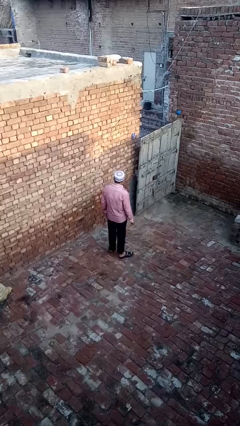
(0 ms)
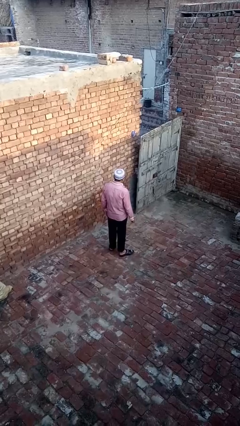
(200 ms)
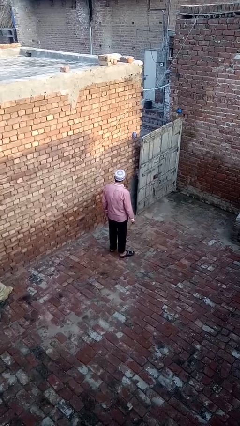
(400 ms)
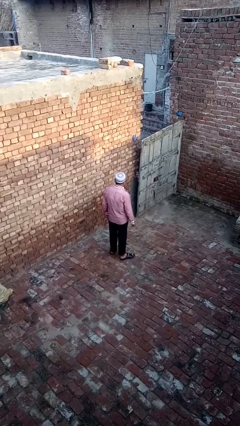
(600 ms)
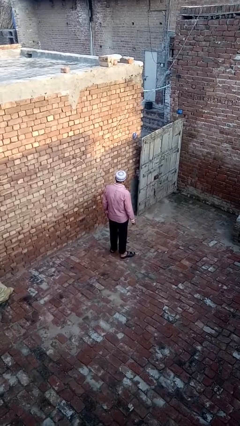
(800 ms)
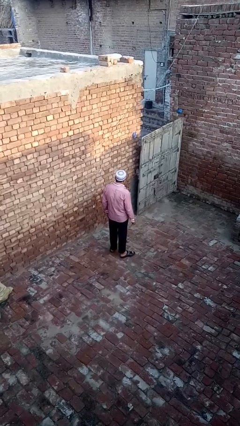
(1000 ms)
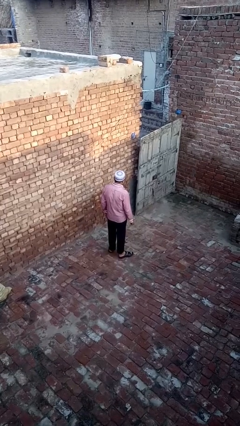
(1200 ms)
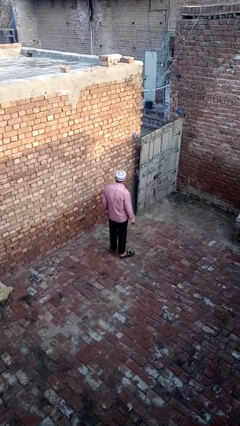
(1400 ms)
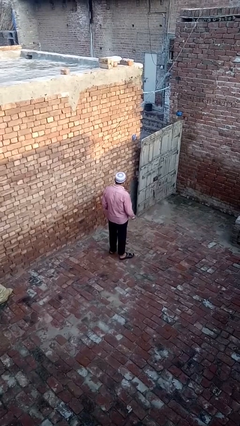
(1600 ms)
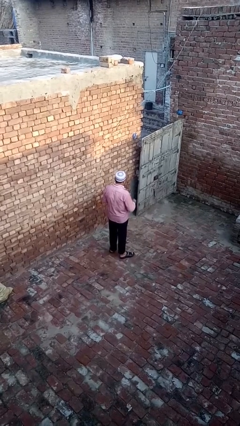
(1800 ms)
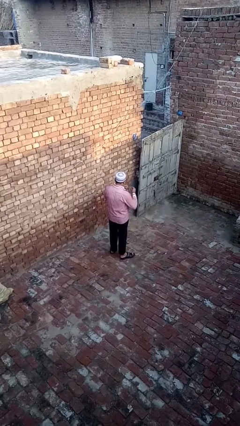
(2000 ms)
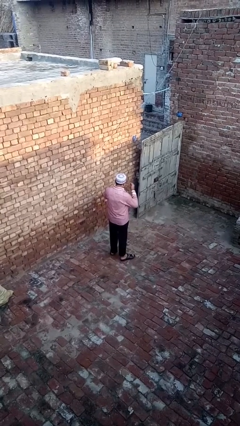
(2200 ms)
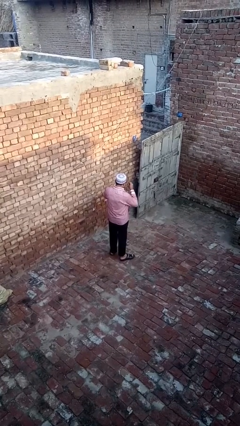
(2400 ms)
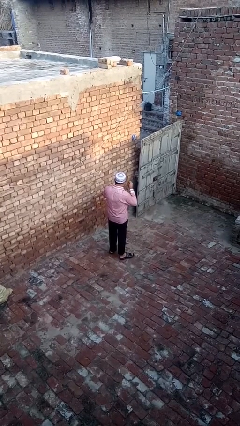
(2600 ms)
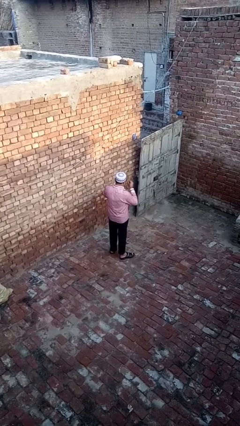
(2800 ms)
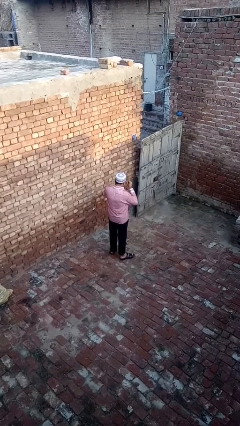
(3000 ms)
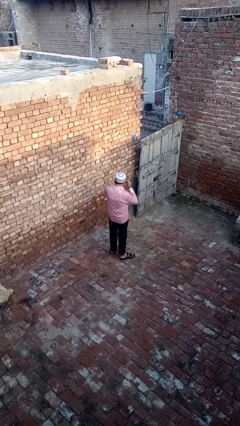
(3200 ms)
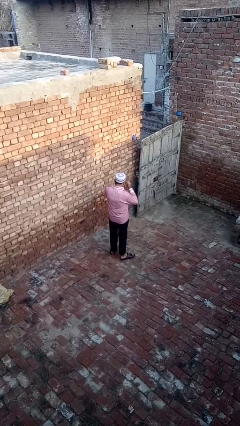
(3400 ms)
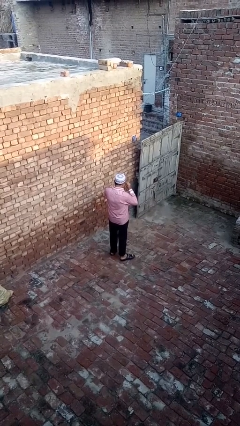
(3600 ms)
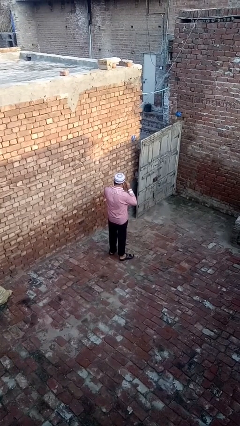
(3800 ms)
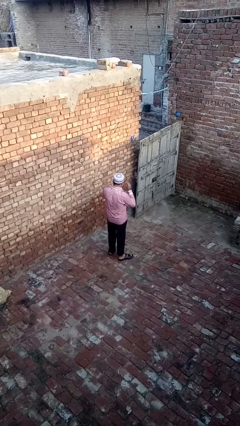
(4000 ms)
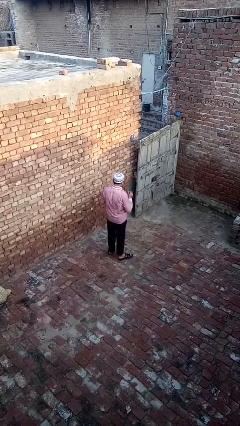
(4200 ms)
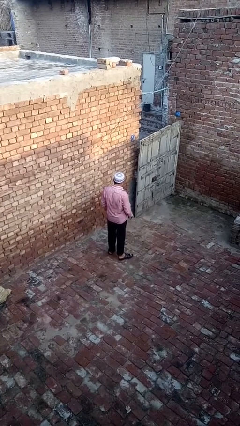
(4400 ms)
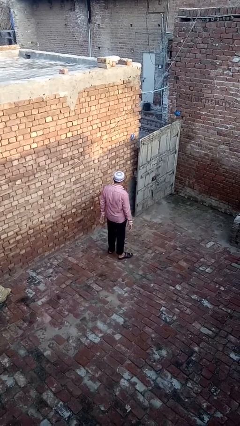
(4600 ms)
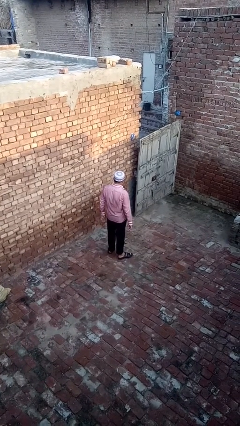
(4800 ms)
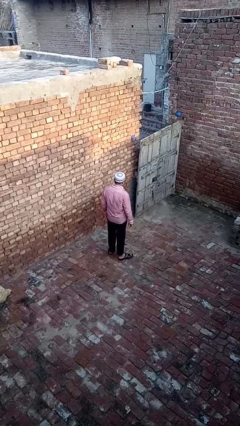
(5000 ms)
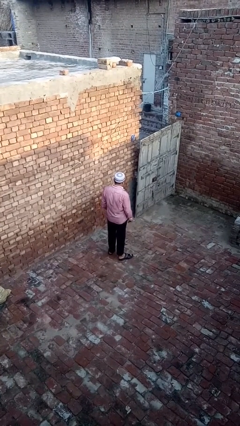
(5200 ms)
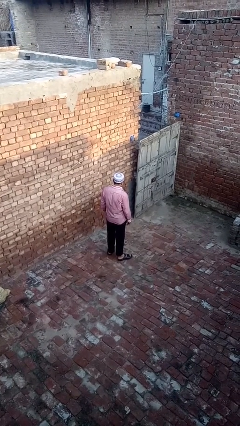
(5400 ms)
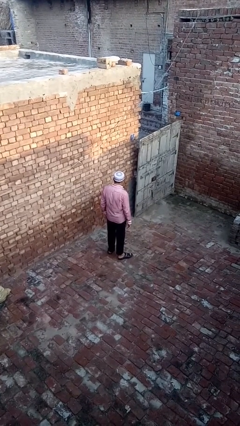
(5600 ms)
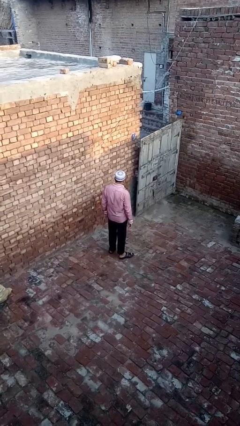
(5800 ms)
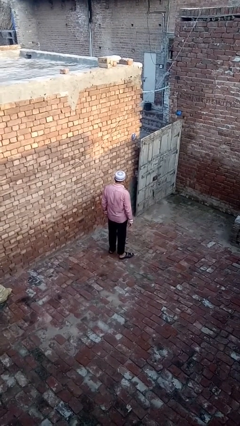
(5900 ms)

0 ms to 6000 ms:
person puts on glasses

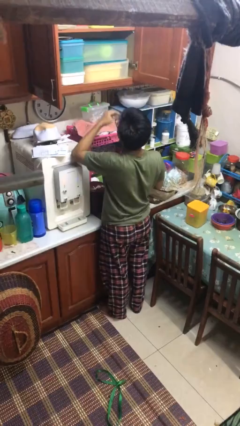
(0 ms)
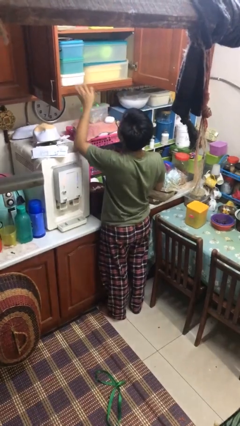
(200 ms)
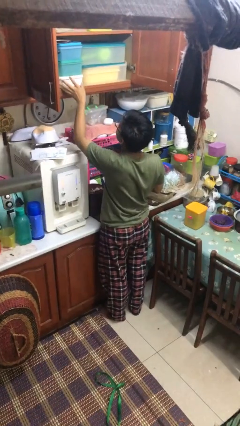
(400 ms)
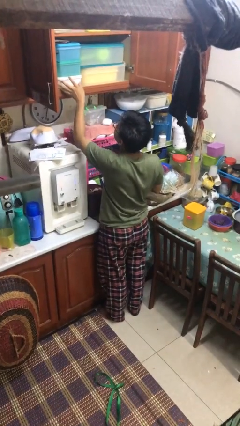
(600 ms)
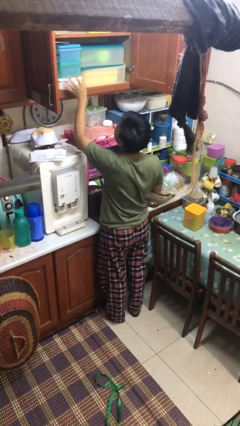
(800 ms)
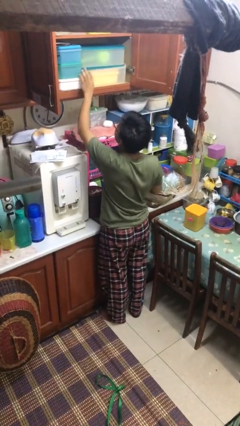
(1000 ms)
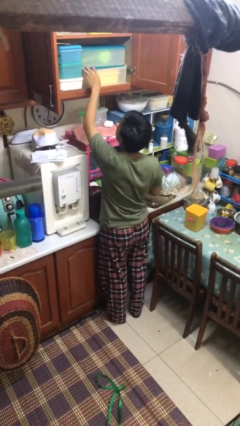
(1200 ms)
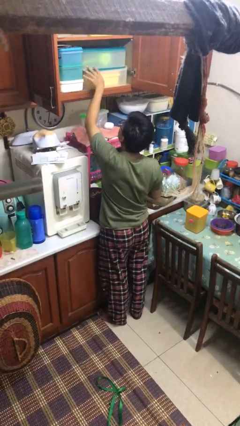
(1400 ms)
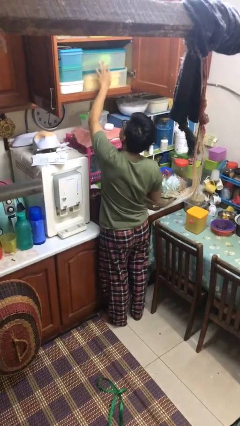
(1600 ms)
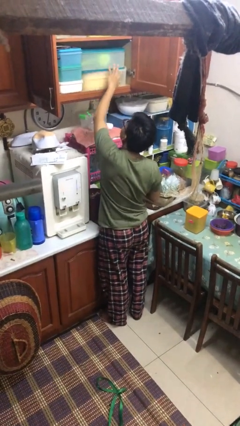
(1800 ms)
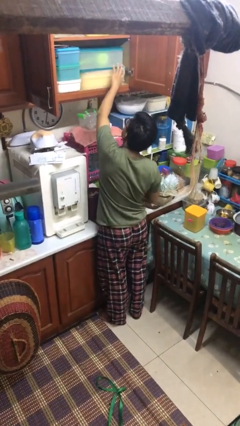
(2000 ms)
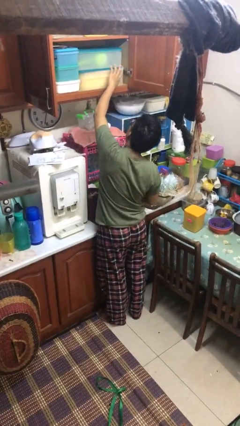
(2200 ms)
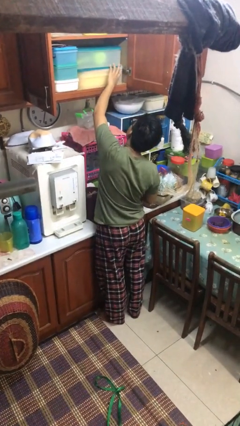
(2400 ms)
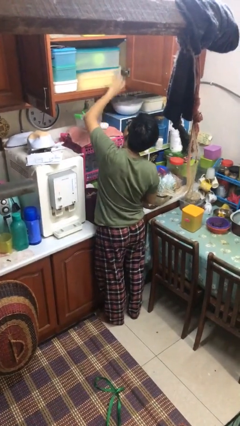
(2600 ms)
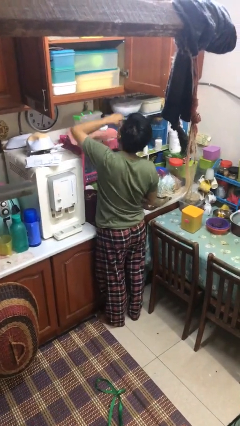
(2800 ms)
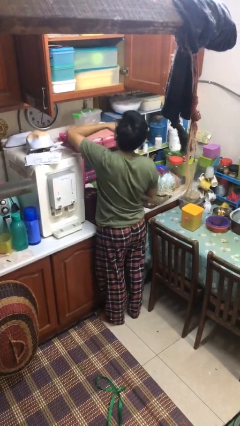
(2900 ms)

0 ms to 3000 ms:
person searches in kitchen drawer

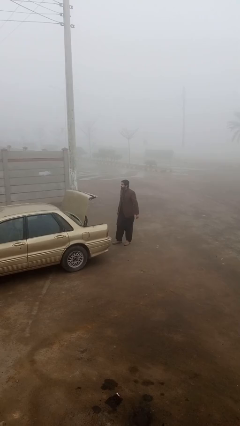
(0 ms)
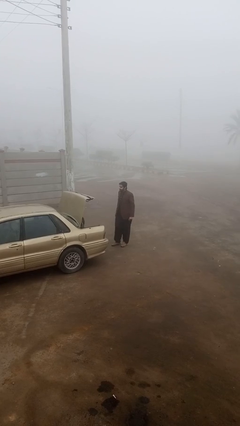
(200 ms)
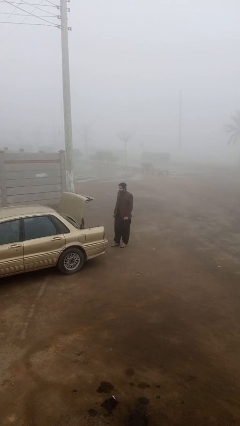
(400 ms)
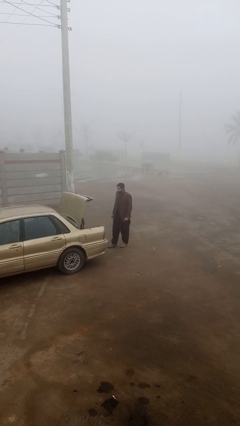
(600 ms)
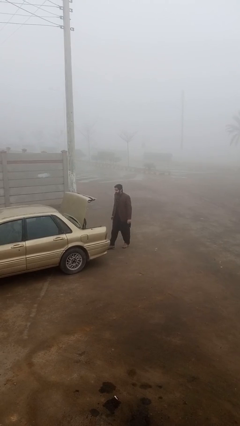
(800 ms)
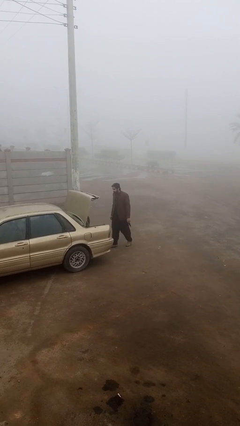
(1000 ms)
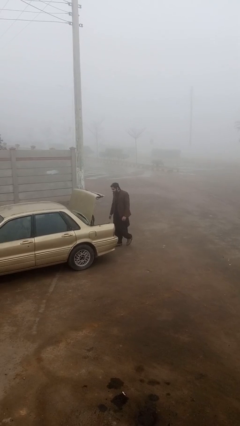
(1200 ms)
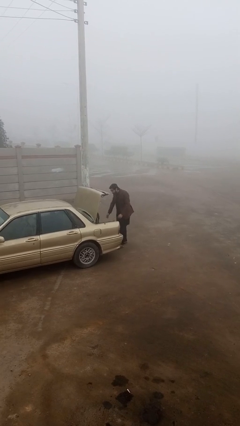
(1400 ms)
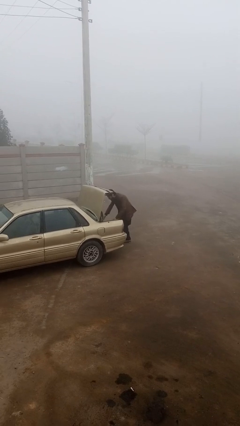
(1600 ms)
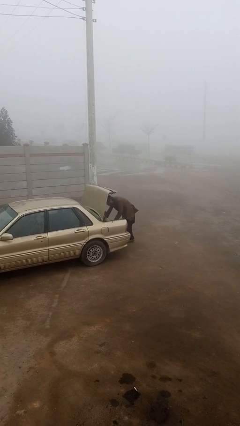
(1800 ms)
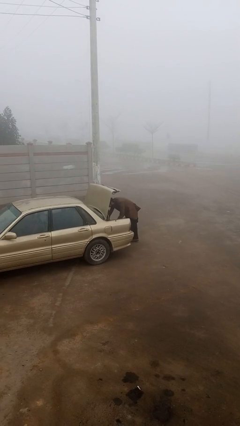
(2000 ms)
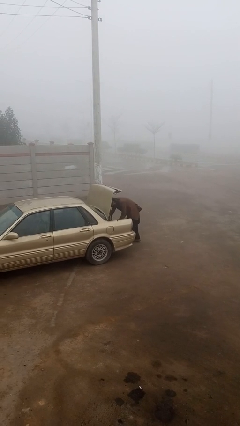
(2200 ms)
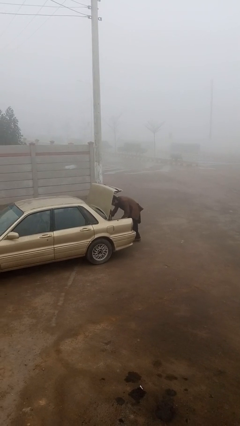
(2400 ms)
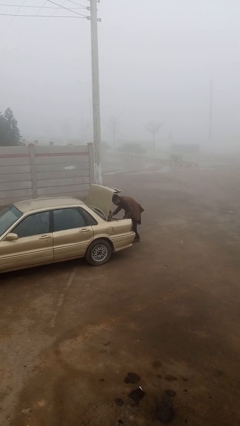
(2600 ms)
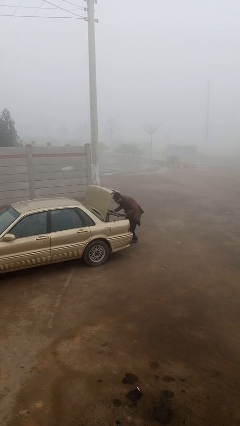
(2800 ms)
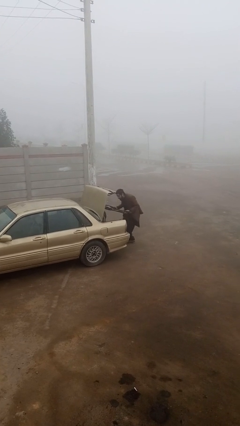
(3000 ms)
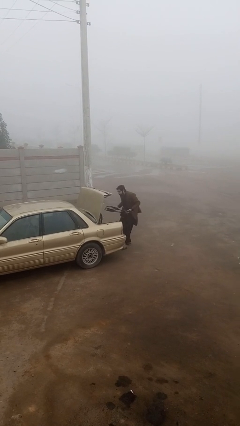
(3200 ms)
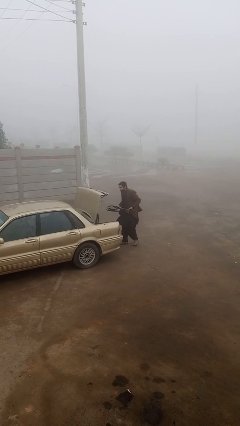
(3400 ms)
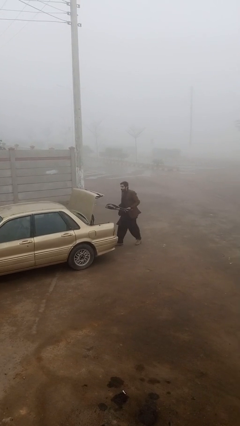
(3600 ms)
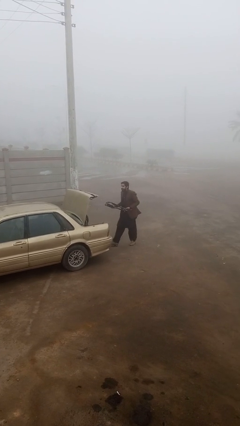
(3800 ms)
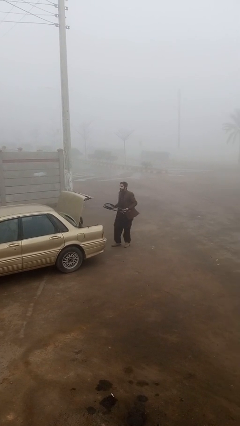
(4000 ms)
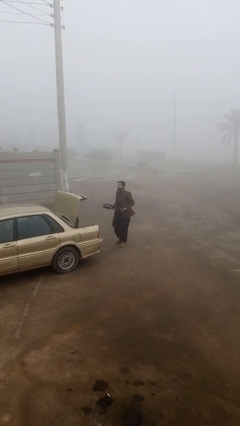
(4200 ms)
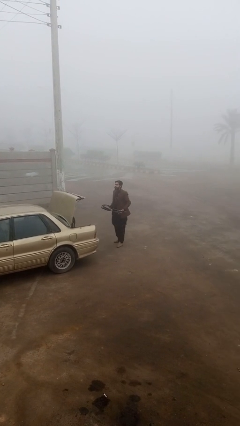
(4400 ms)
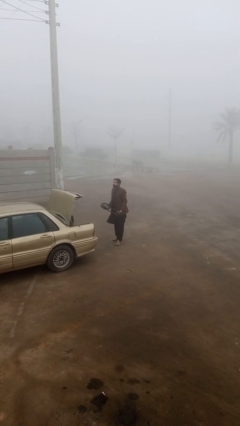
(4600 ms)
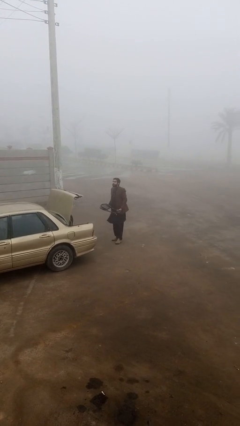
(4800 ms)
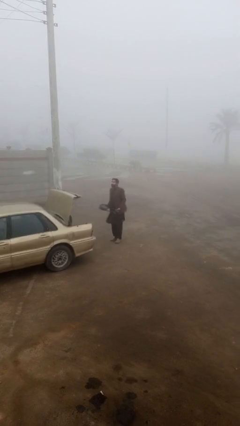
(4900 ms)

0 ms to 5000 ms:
person unloads car

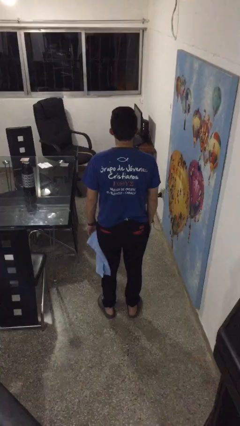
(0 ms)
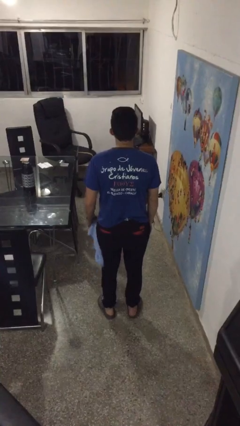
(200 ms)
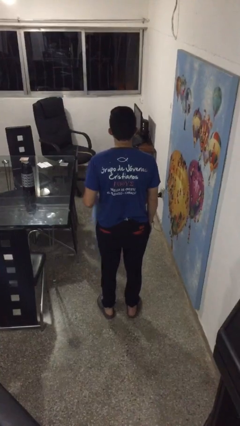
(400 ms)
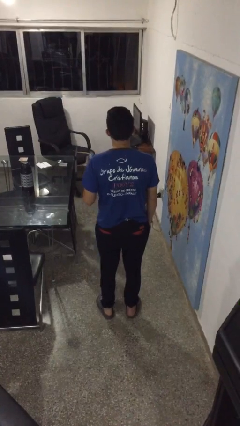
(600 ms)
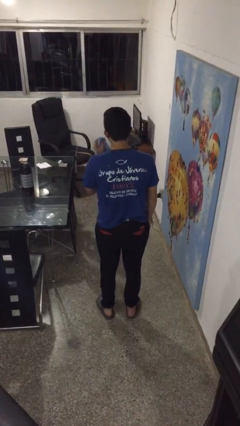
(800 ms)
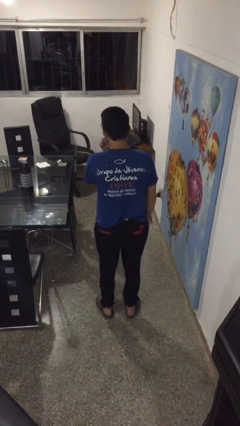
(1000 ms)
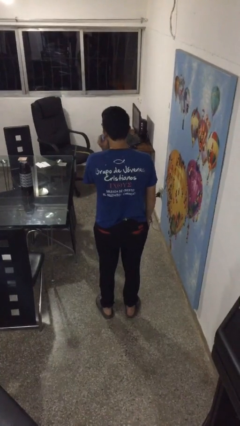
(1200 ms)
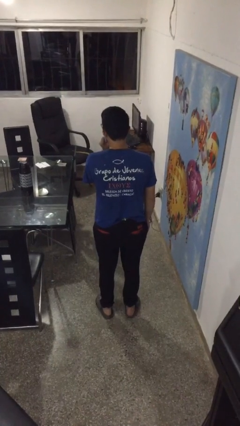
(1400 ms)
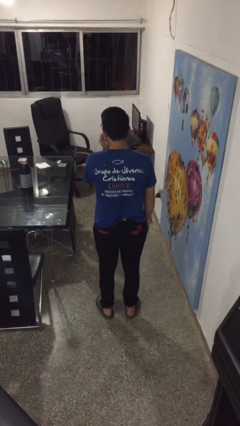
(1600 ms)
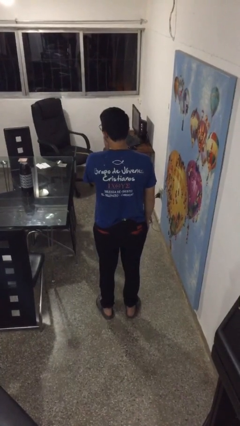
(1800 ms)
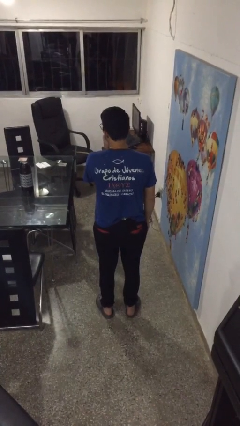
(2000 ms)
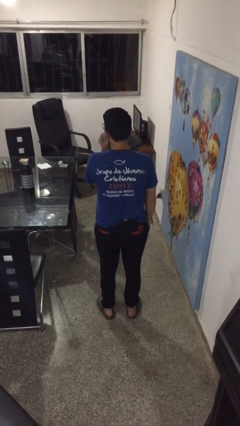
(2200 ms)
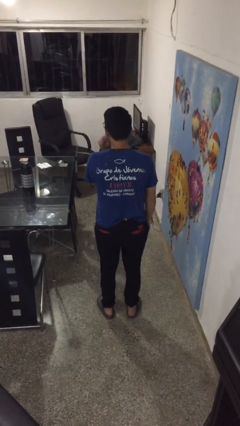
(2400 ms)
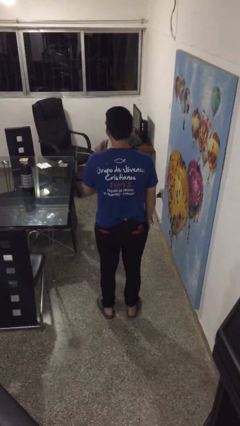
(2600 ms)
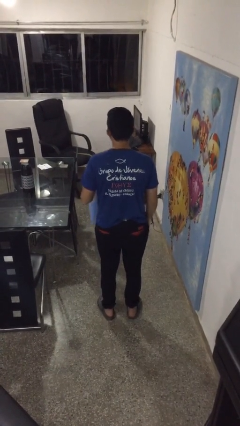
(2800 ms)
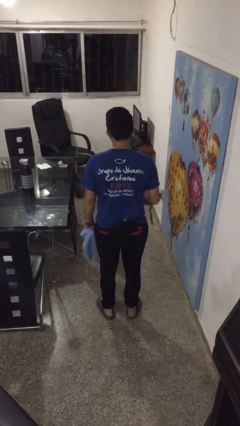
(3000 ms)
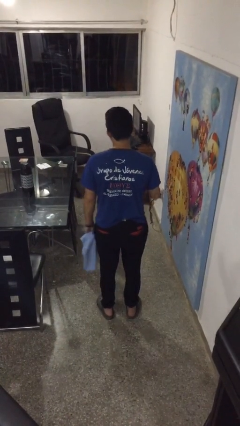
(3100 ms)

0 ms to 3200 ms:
person wipes mouth with napkin

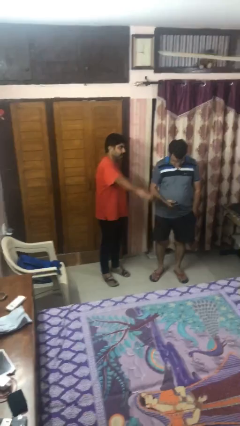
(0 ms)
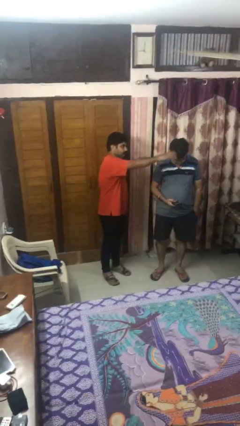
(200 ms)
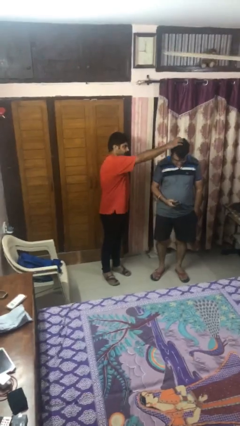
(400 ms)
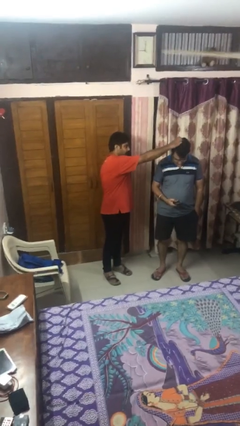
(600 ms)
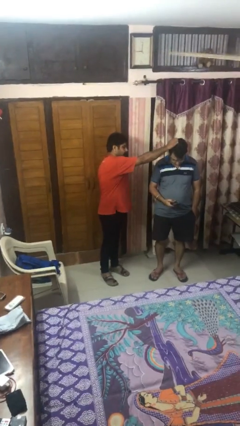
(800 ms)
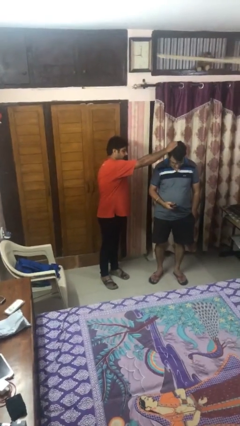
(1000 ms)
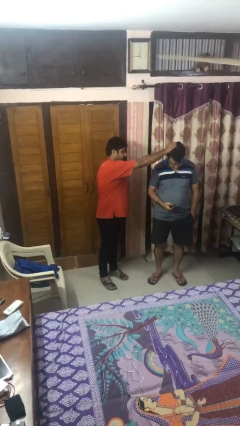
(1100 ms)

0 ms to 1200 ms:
person grabs person by hair
